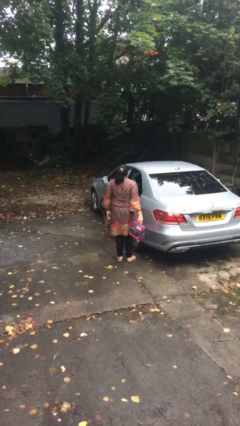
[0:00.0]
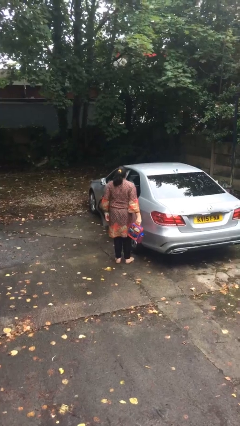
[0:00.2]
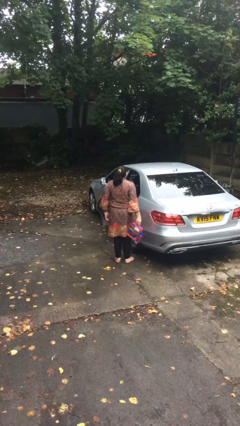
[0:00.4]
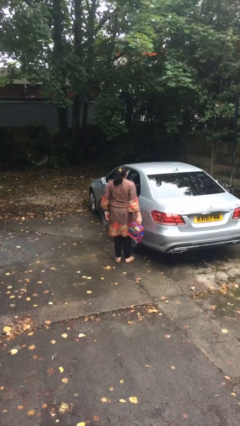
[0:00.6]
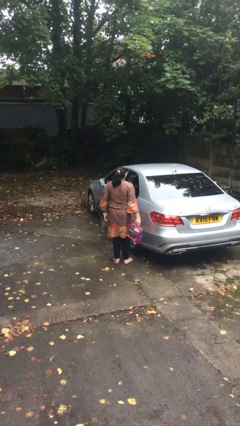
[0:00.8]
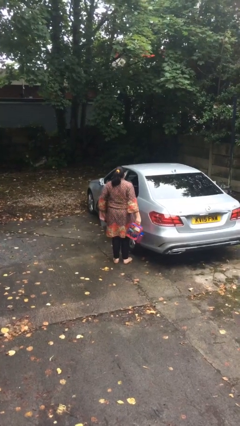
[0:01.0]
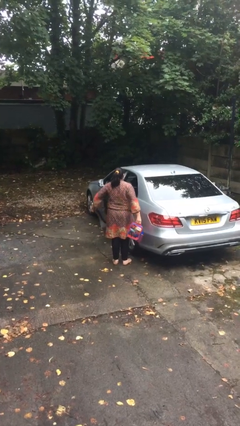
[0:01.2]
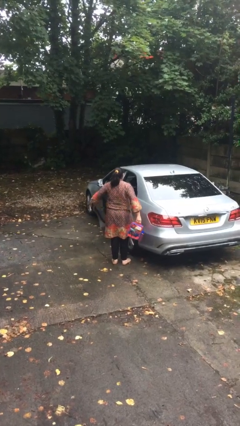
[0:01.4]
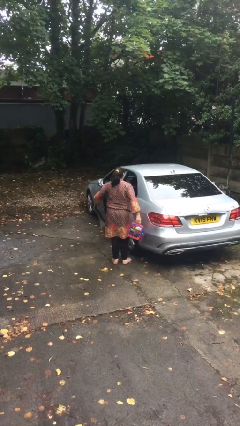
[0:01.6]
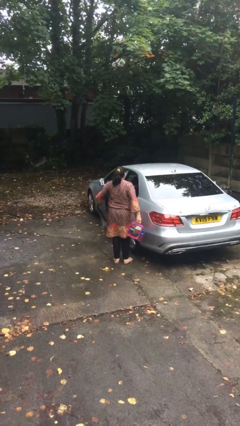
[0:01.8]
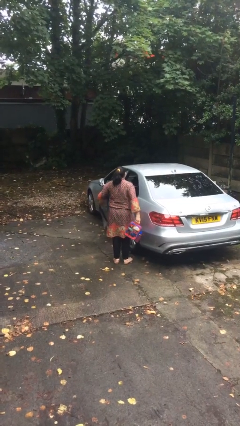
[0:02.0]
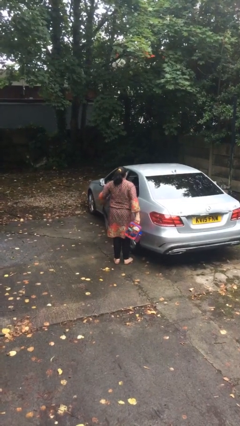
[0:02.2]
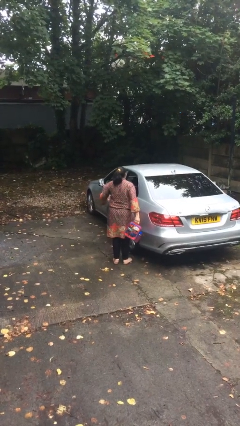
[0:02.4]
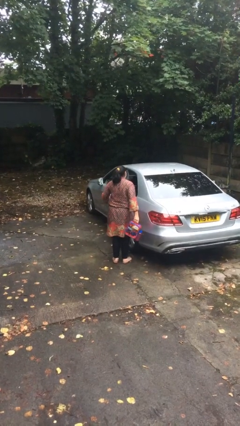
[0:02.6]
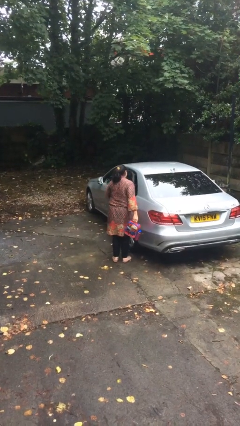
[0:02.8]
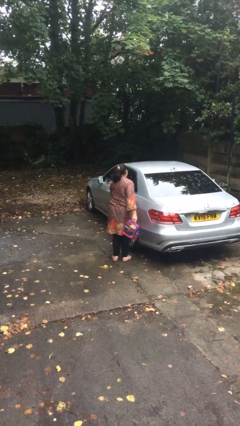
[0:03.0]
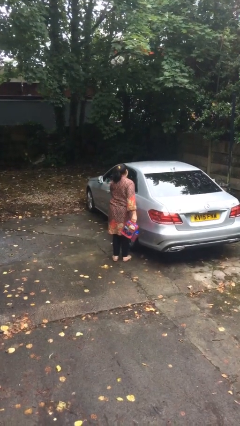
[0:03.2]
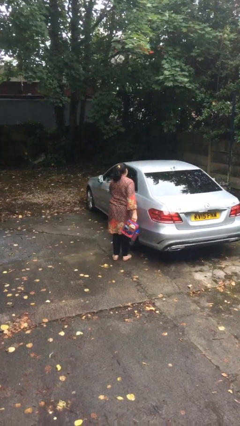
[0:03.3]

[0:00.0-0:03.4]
person closes car door

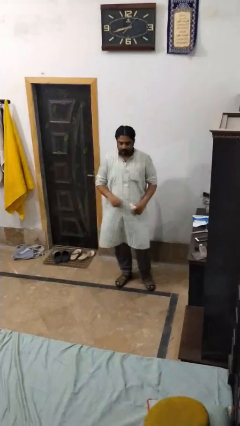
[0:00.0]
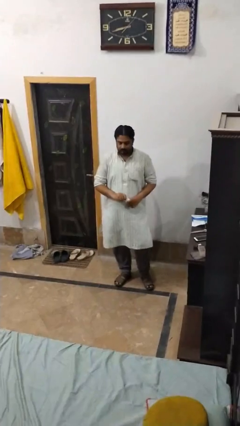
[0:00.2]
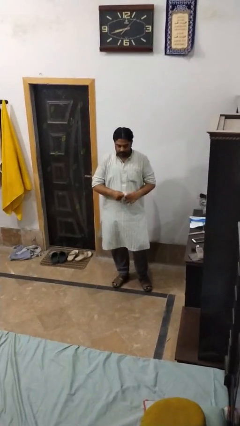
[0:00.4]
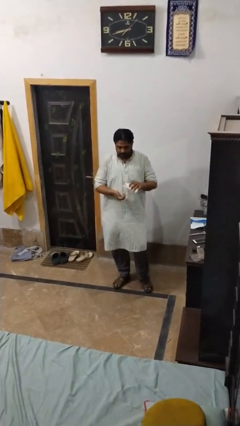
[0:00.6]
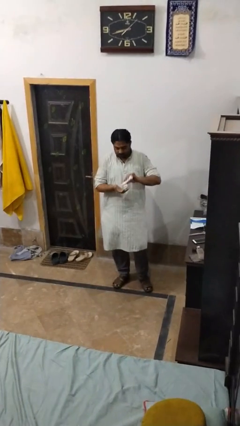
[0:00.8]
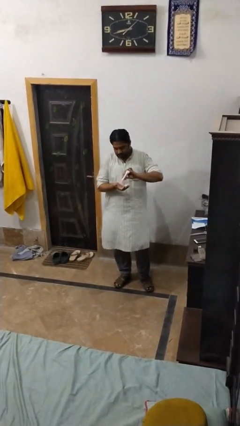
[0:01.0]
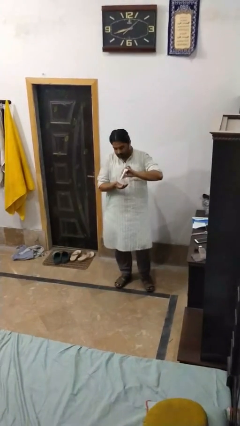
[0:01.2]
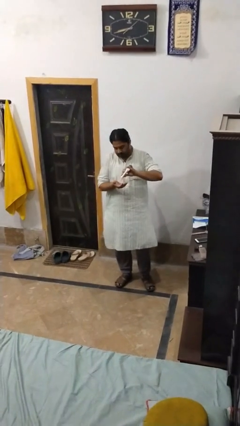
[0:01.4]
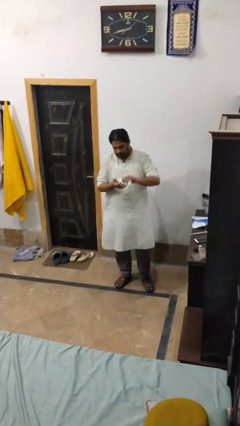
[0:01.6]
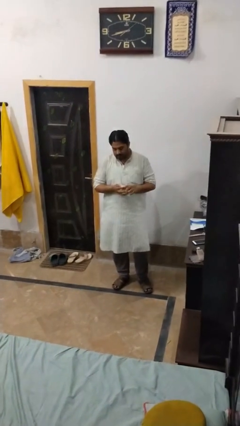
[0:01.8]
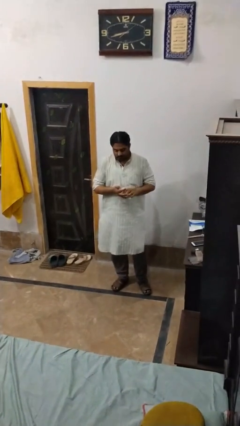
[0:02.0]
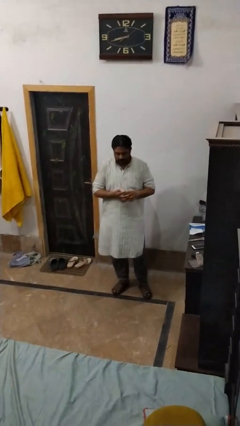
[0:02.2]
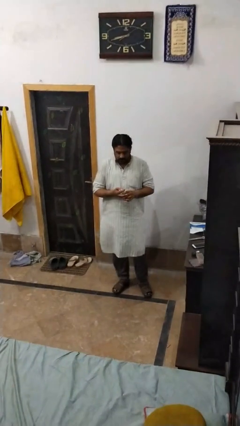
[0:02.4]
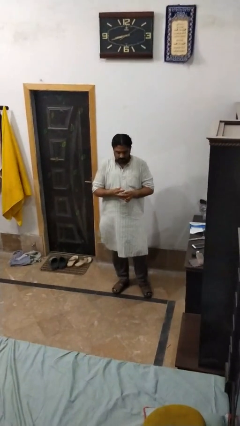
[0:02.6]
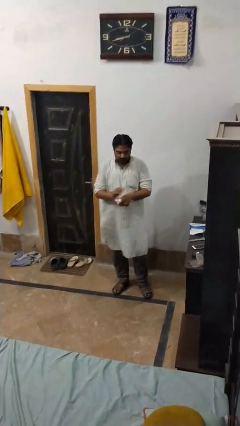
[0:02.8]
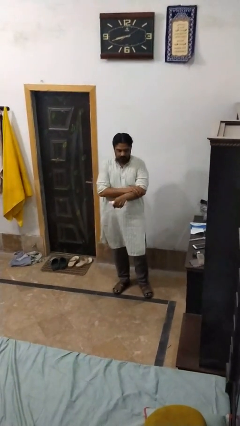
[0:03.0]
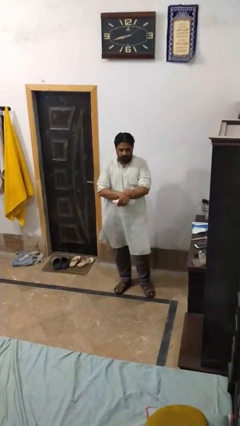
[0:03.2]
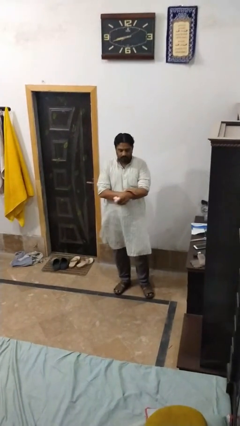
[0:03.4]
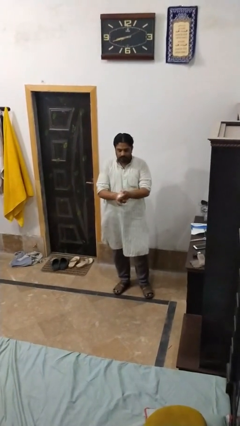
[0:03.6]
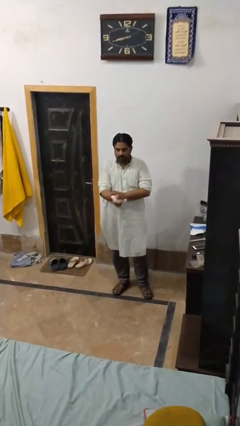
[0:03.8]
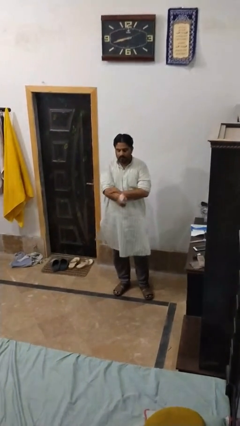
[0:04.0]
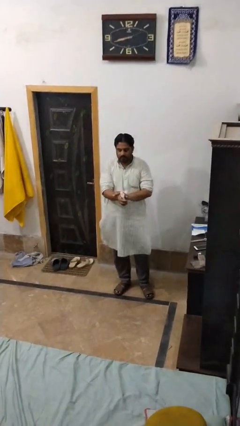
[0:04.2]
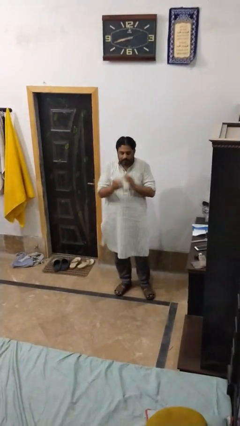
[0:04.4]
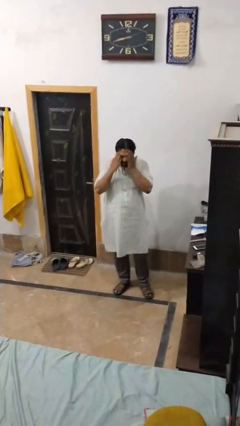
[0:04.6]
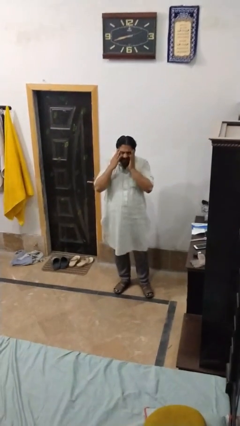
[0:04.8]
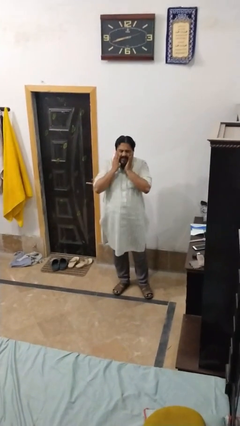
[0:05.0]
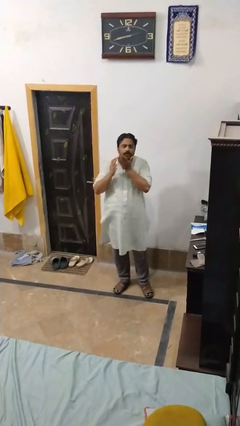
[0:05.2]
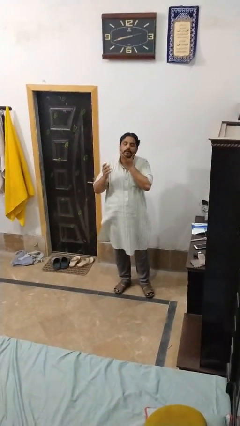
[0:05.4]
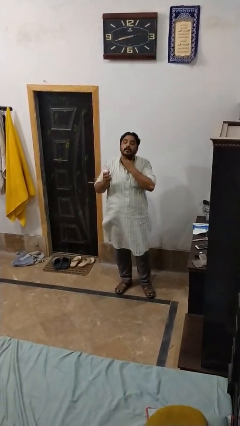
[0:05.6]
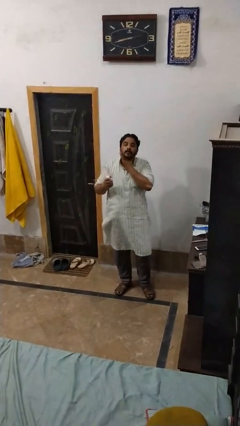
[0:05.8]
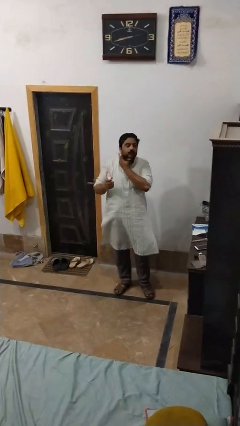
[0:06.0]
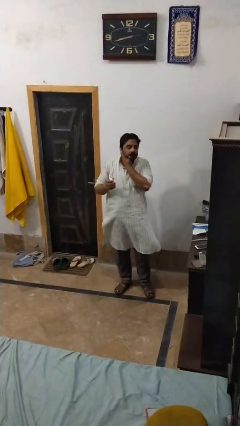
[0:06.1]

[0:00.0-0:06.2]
person applies sunscreen

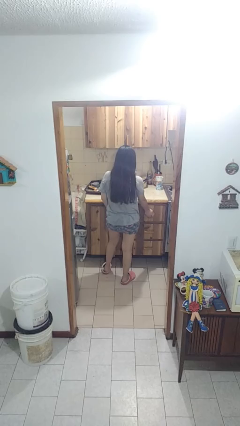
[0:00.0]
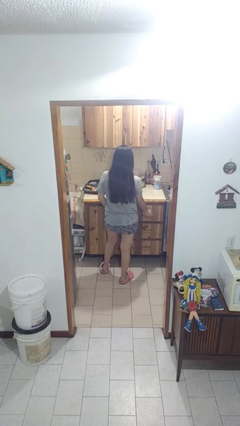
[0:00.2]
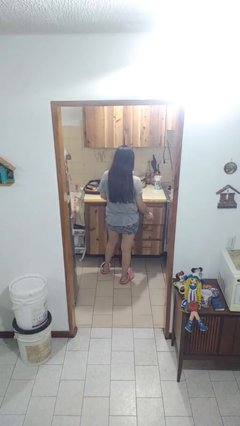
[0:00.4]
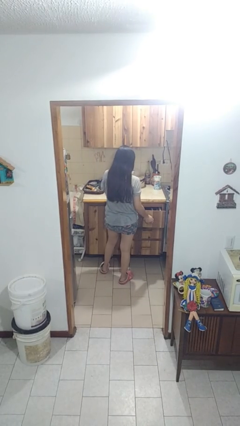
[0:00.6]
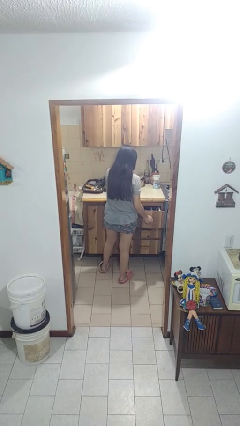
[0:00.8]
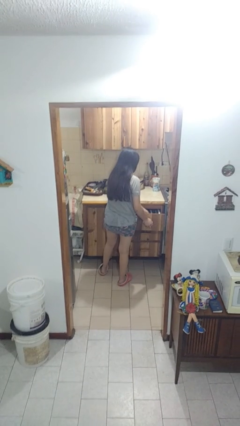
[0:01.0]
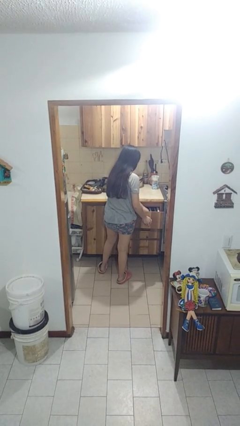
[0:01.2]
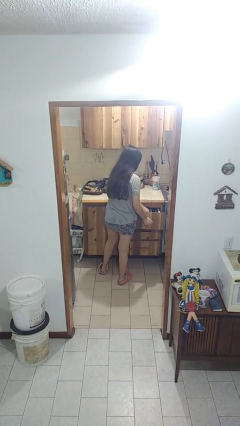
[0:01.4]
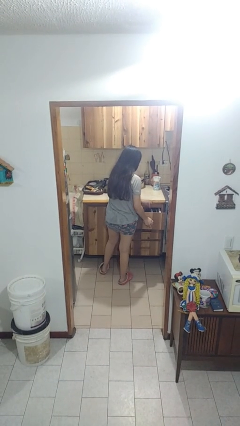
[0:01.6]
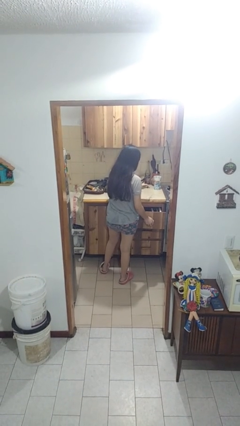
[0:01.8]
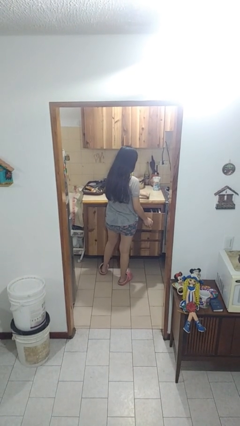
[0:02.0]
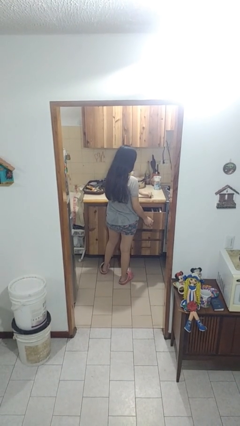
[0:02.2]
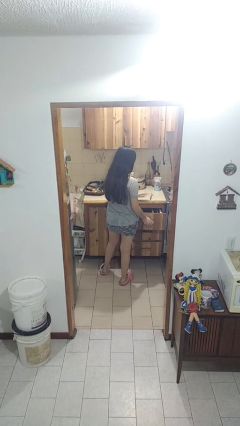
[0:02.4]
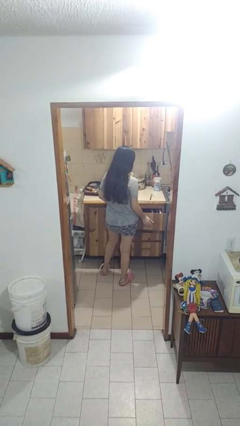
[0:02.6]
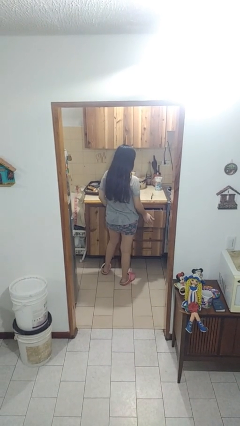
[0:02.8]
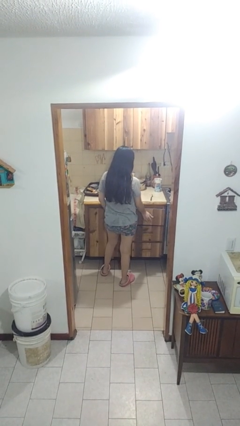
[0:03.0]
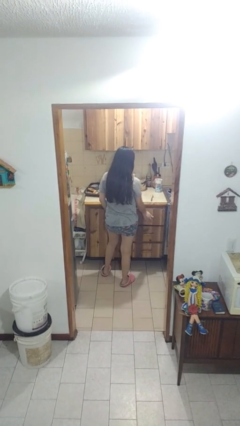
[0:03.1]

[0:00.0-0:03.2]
person takes object from kitchen drawer

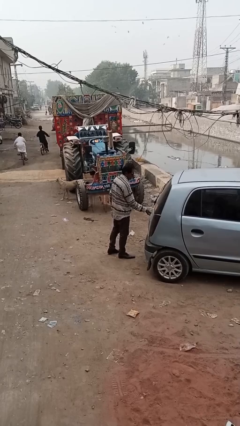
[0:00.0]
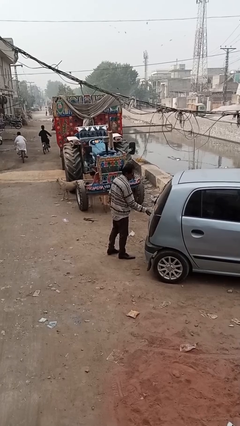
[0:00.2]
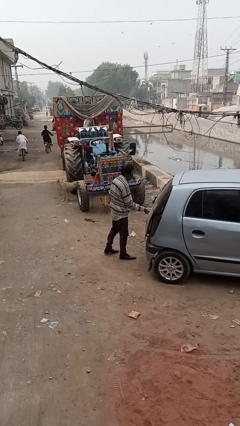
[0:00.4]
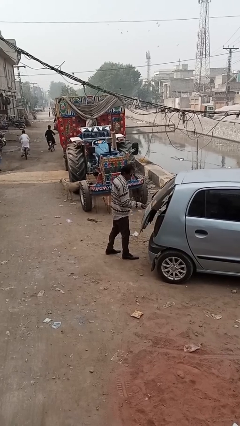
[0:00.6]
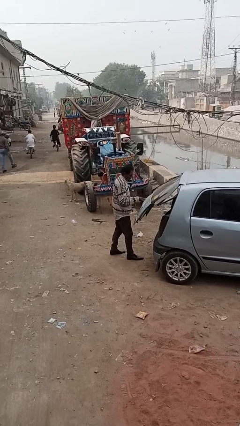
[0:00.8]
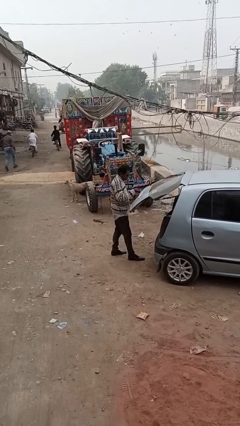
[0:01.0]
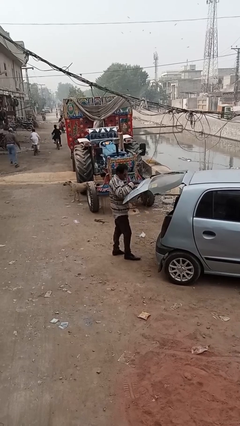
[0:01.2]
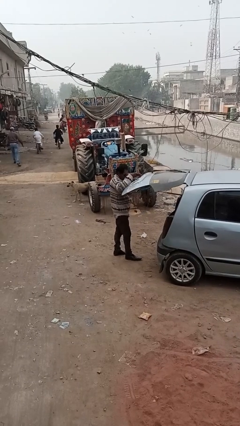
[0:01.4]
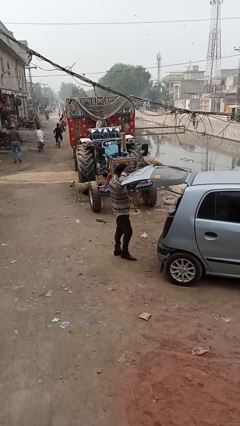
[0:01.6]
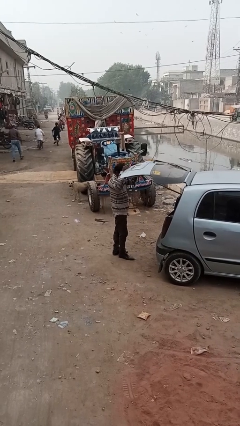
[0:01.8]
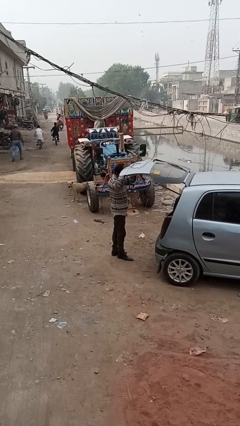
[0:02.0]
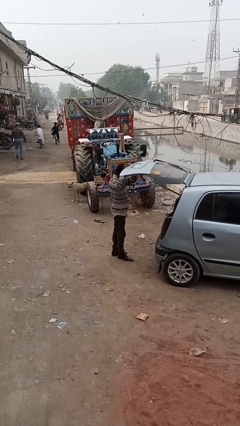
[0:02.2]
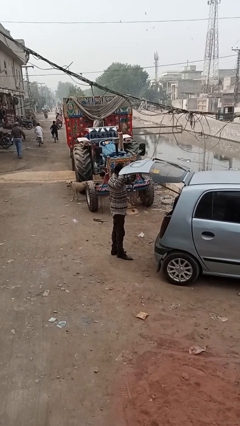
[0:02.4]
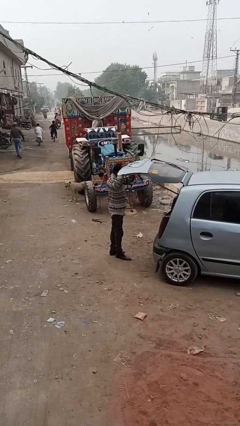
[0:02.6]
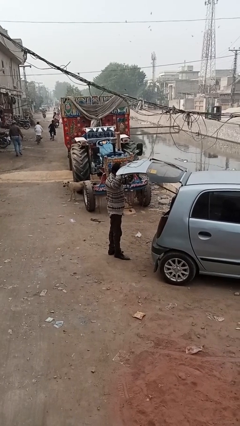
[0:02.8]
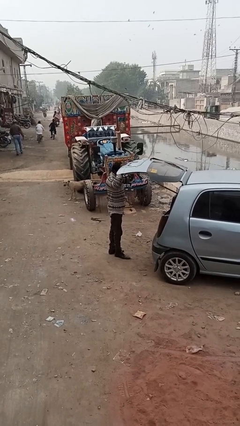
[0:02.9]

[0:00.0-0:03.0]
person opens car trunk

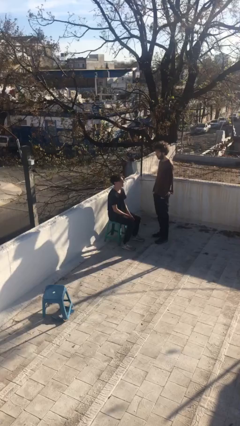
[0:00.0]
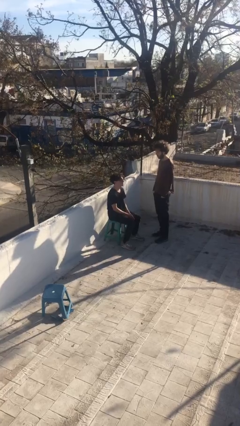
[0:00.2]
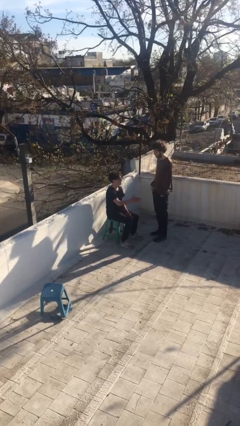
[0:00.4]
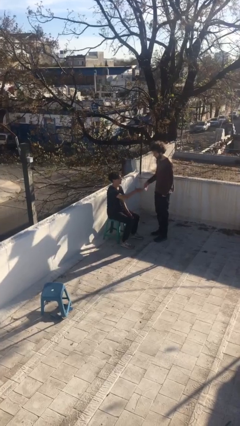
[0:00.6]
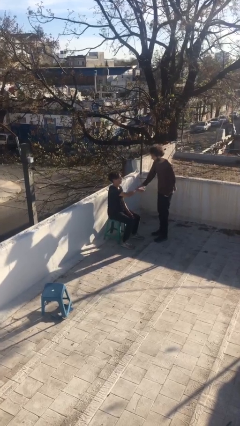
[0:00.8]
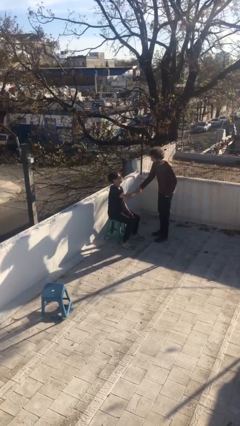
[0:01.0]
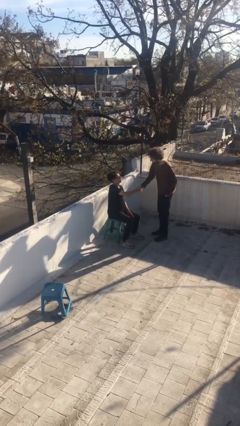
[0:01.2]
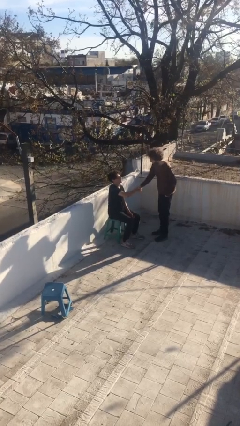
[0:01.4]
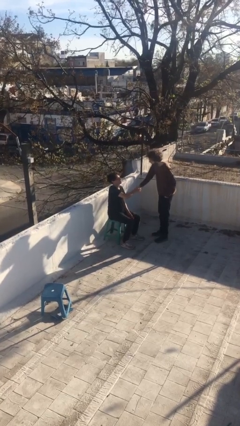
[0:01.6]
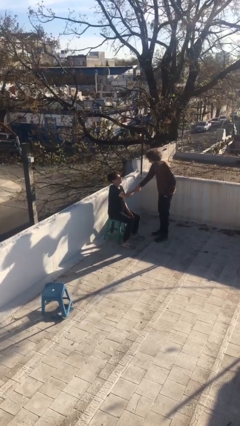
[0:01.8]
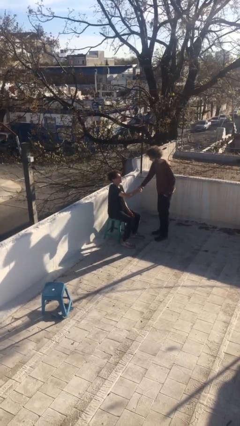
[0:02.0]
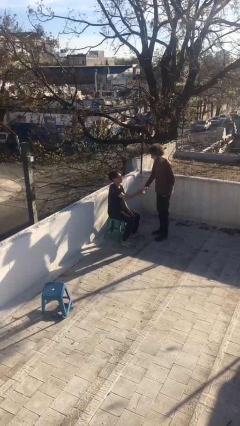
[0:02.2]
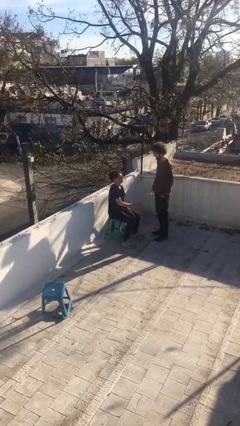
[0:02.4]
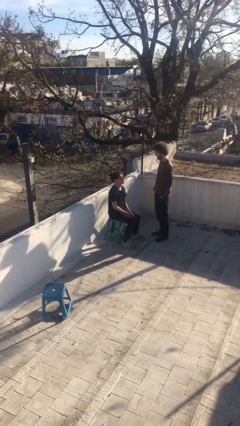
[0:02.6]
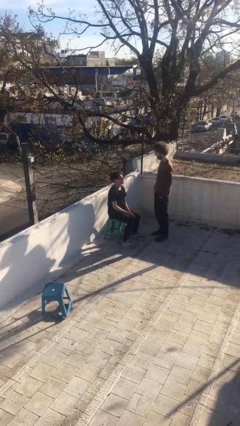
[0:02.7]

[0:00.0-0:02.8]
person shakes hand
